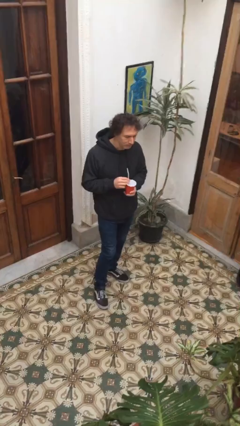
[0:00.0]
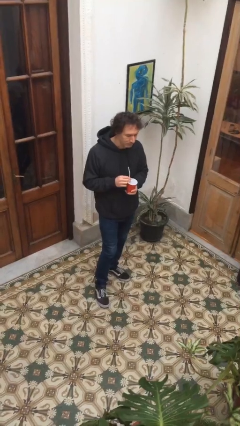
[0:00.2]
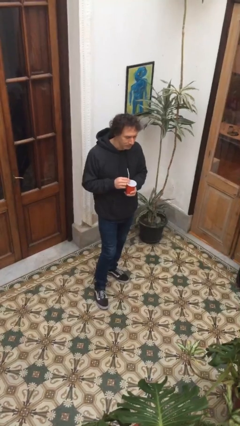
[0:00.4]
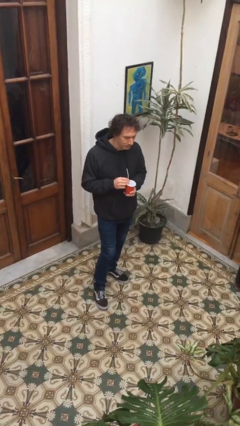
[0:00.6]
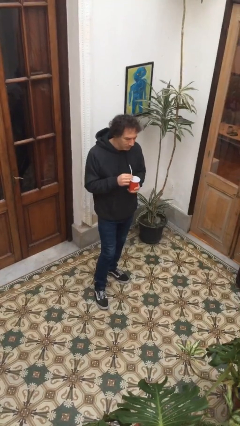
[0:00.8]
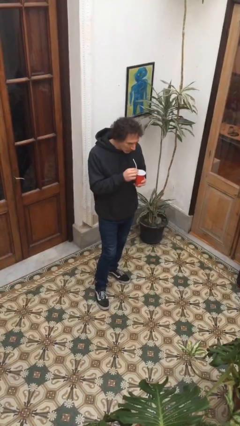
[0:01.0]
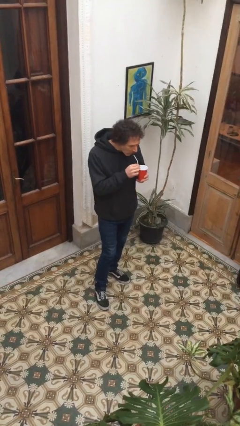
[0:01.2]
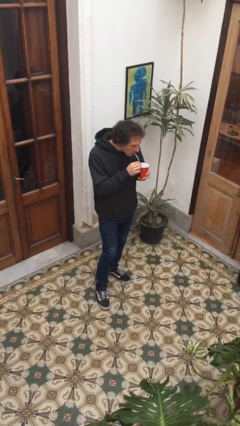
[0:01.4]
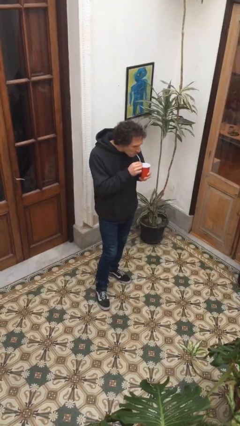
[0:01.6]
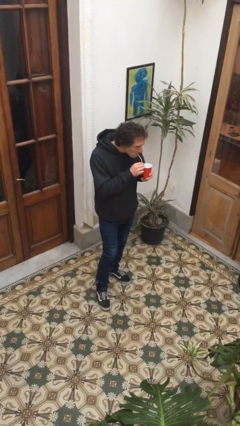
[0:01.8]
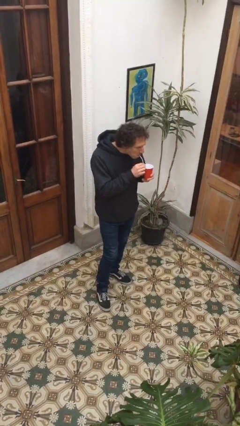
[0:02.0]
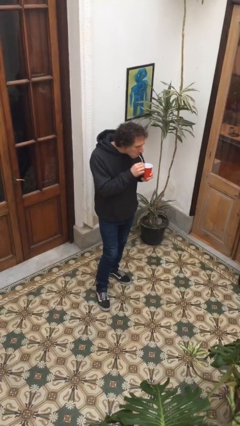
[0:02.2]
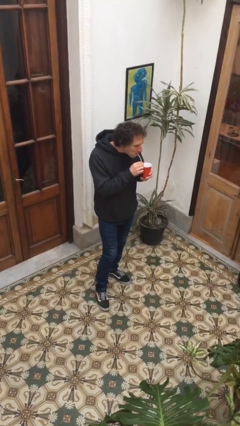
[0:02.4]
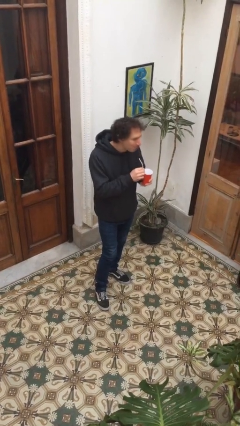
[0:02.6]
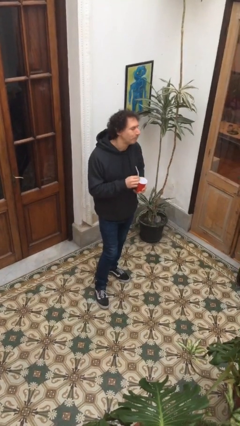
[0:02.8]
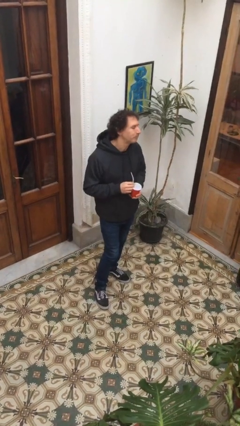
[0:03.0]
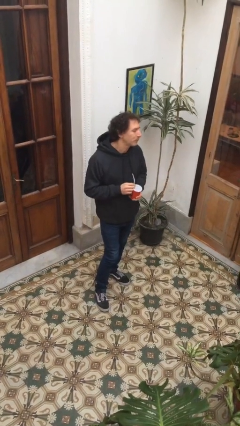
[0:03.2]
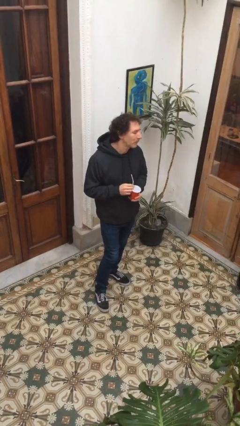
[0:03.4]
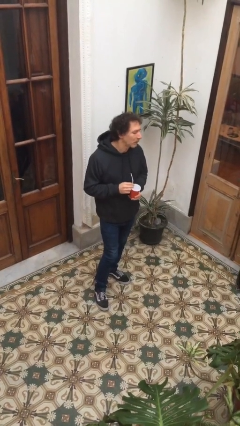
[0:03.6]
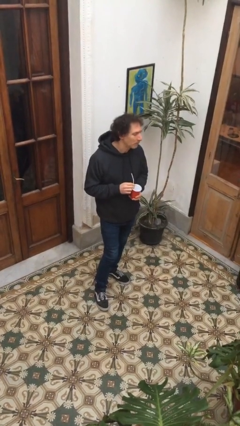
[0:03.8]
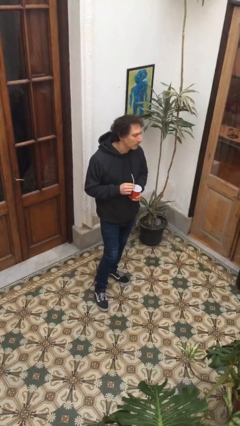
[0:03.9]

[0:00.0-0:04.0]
person drinks from straw

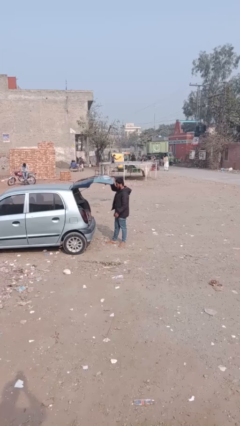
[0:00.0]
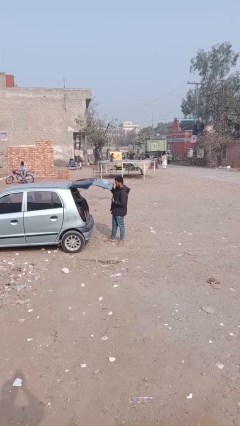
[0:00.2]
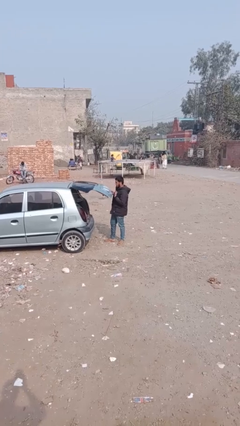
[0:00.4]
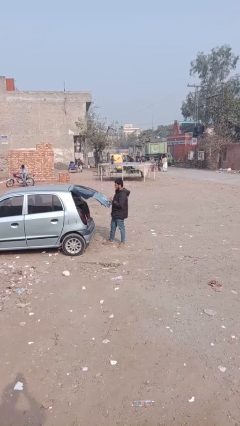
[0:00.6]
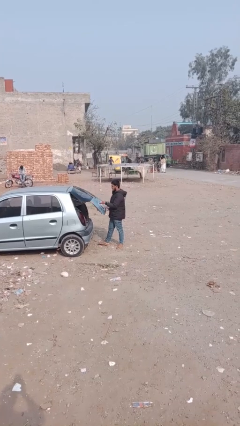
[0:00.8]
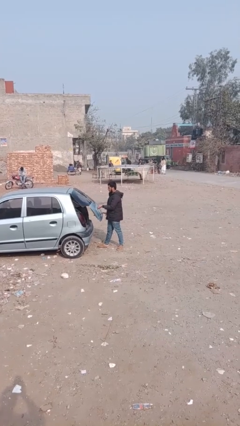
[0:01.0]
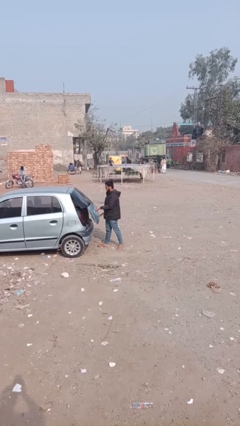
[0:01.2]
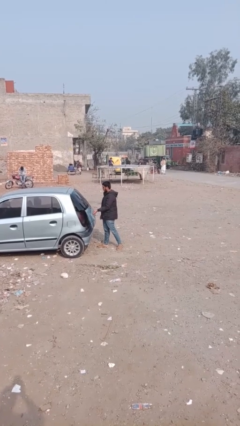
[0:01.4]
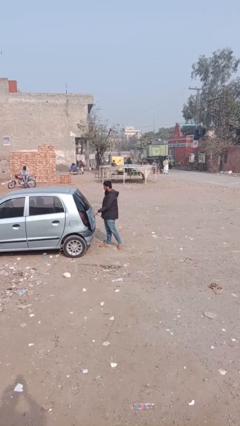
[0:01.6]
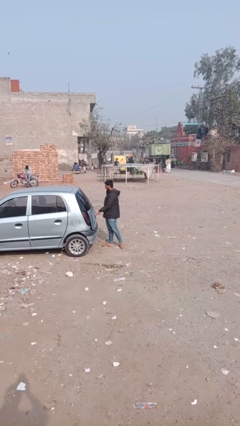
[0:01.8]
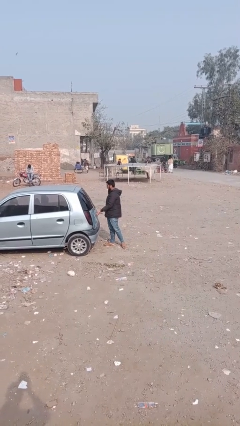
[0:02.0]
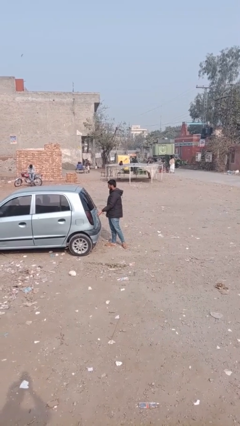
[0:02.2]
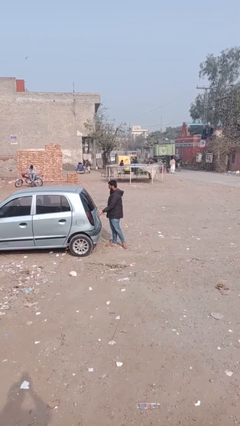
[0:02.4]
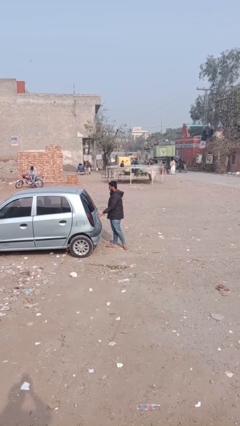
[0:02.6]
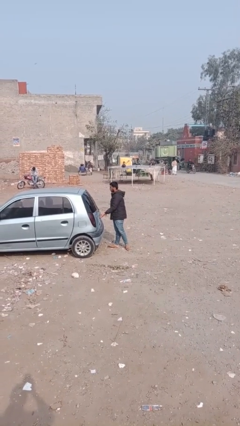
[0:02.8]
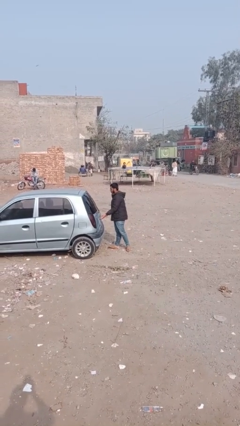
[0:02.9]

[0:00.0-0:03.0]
person closes car trunk

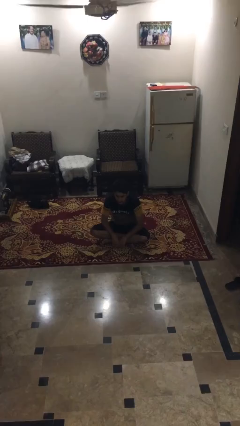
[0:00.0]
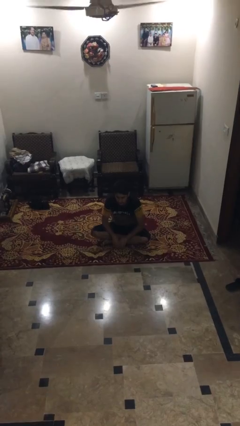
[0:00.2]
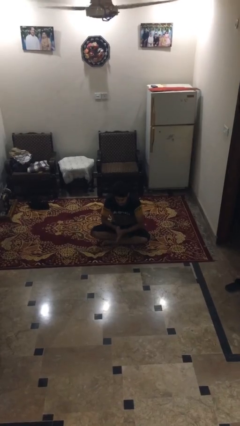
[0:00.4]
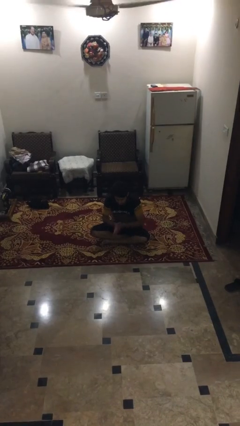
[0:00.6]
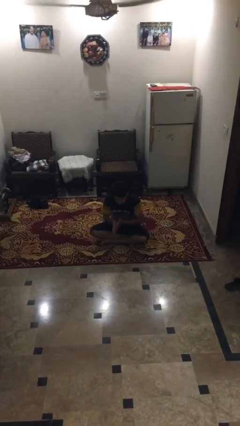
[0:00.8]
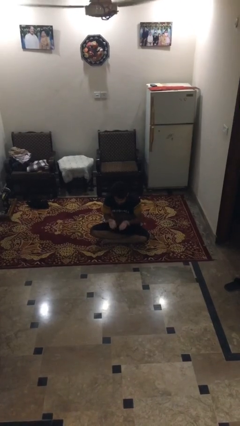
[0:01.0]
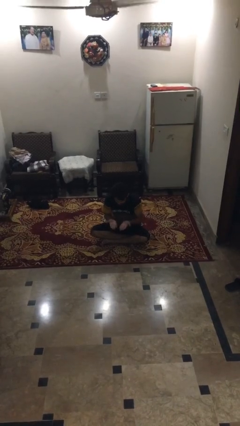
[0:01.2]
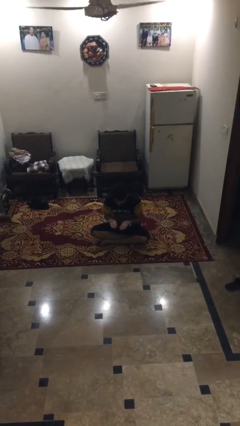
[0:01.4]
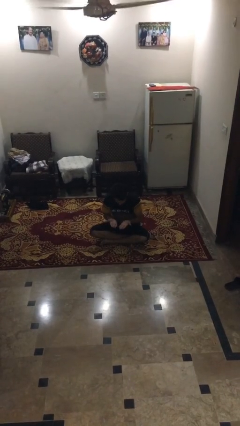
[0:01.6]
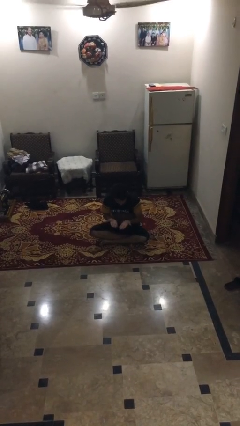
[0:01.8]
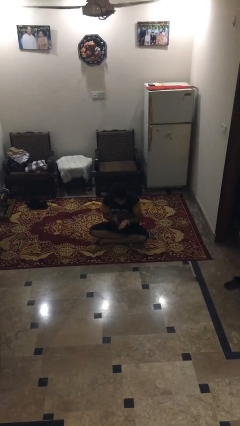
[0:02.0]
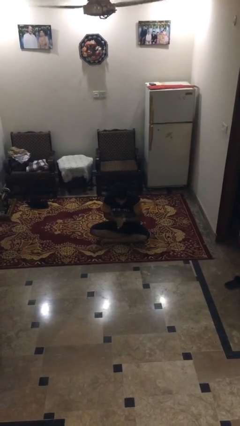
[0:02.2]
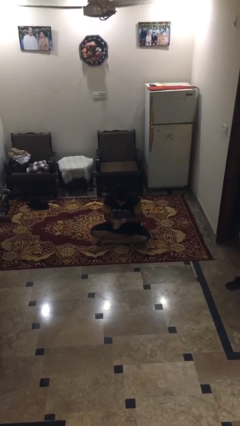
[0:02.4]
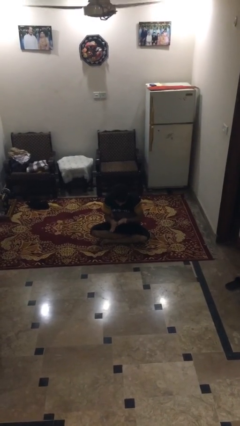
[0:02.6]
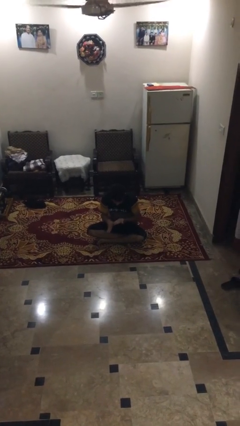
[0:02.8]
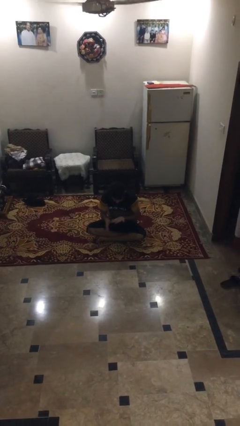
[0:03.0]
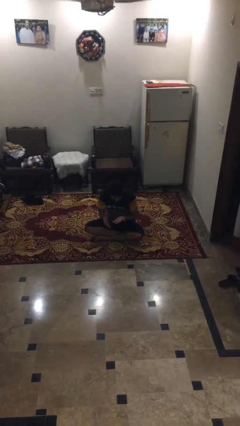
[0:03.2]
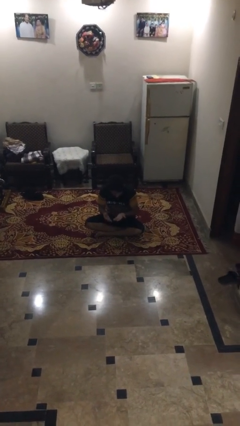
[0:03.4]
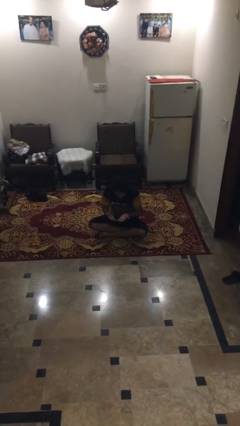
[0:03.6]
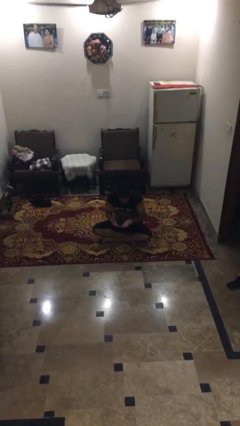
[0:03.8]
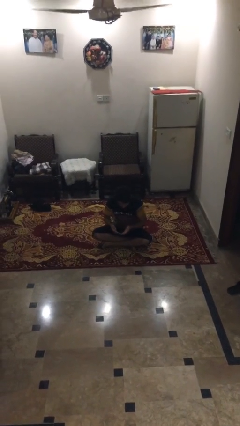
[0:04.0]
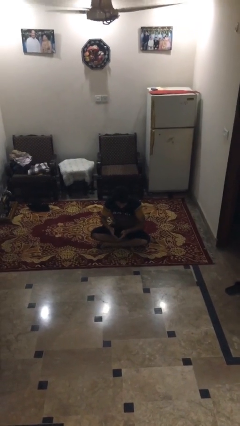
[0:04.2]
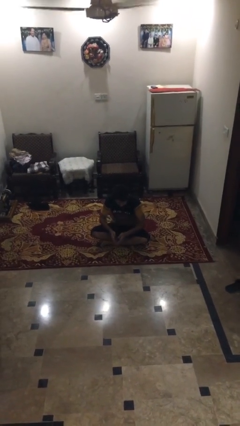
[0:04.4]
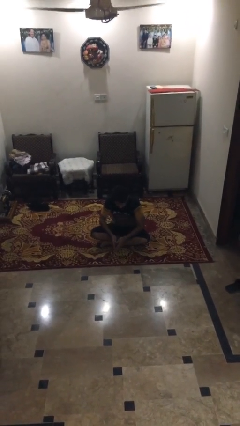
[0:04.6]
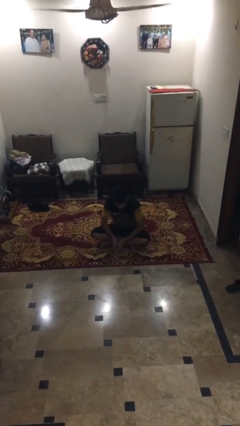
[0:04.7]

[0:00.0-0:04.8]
person looks at hands in lap

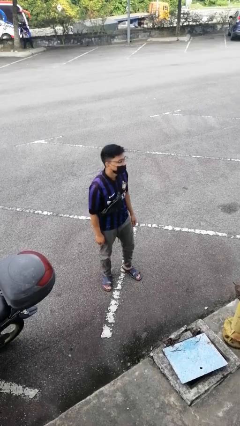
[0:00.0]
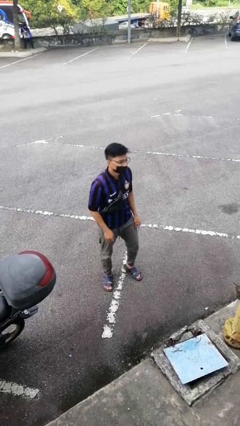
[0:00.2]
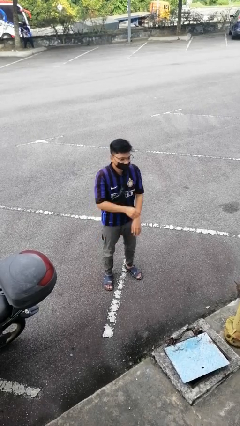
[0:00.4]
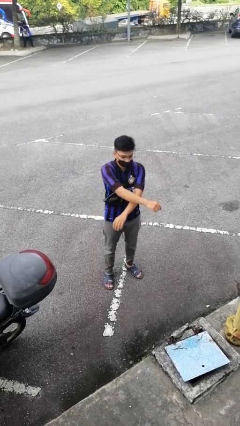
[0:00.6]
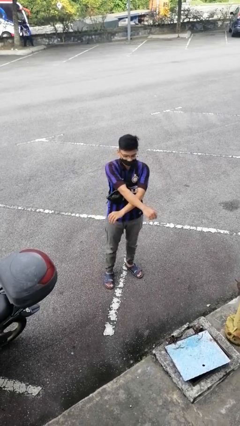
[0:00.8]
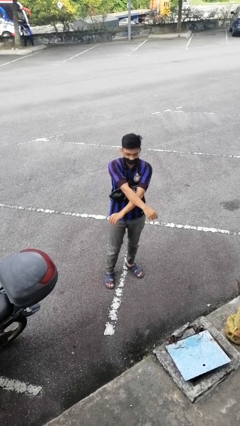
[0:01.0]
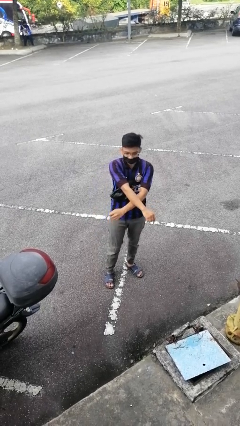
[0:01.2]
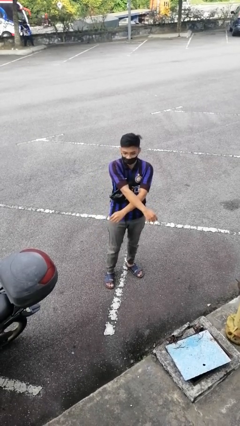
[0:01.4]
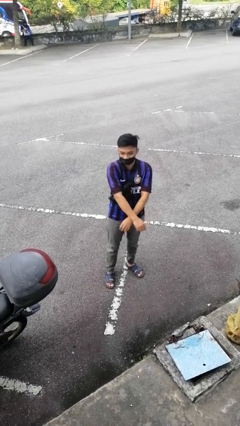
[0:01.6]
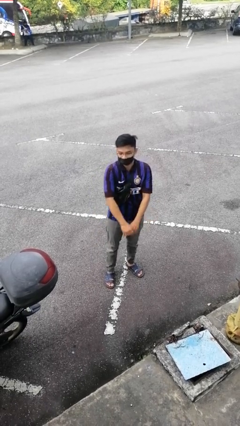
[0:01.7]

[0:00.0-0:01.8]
person gestures arms x

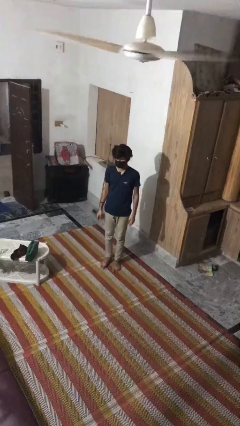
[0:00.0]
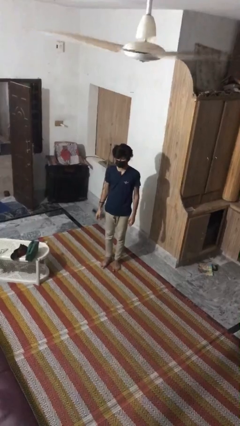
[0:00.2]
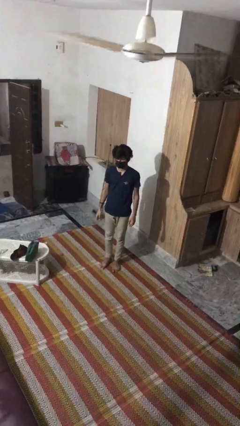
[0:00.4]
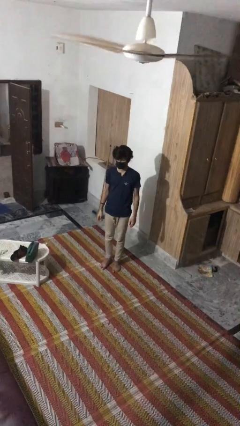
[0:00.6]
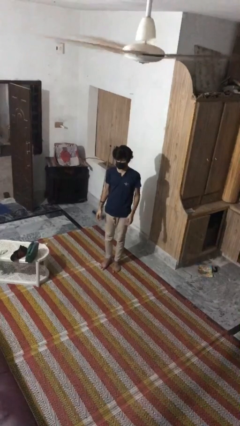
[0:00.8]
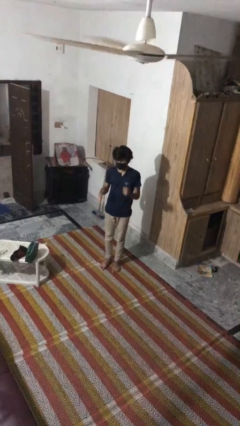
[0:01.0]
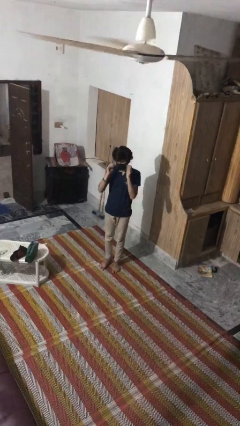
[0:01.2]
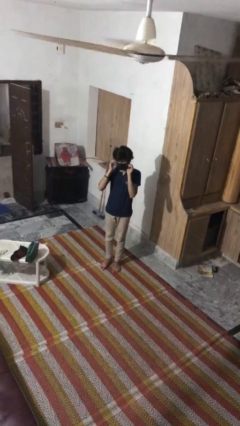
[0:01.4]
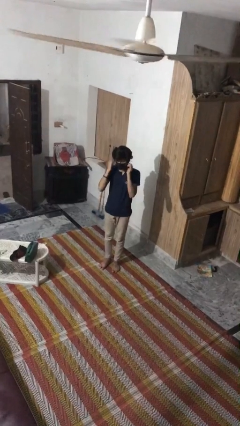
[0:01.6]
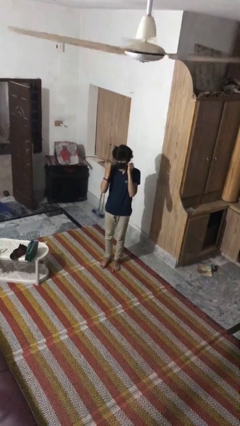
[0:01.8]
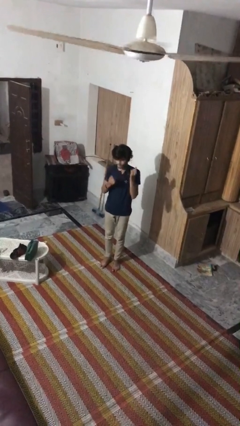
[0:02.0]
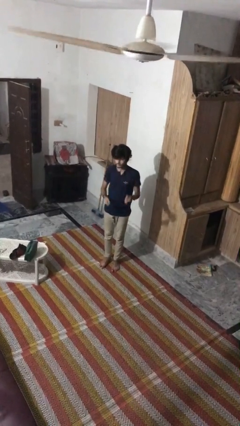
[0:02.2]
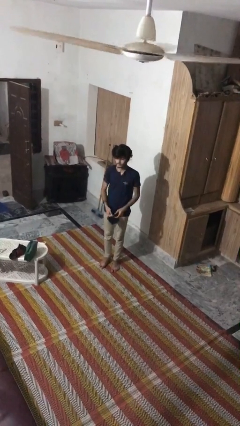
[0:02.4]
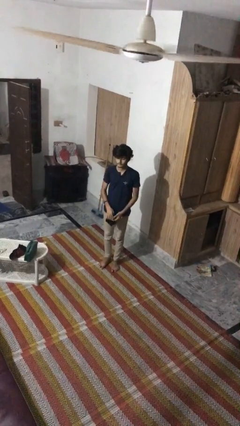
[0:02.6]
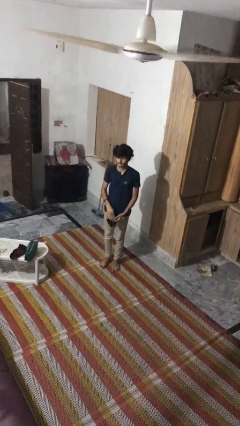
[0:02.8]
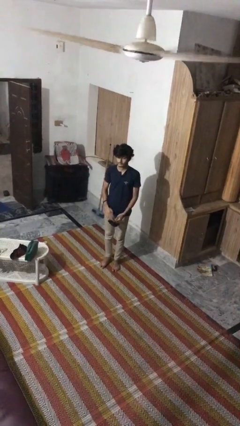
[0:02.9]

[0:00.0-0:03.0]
person takes off facemask

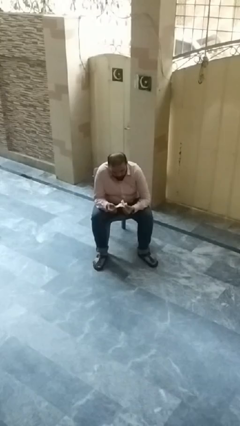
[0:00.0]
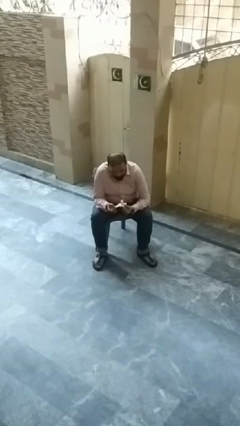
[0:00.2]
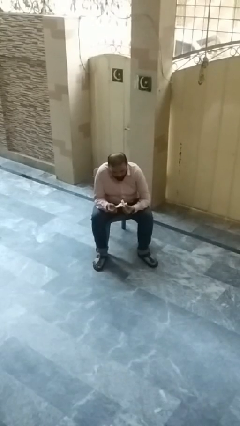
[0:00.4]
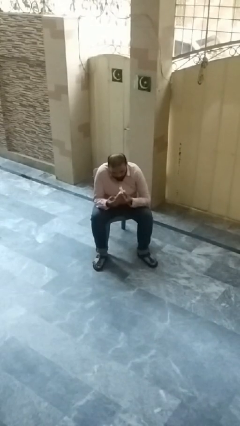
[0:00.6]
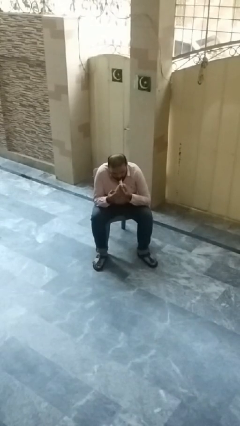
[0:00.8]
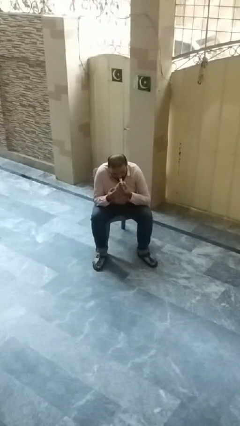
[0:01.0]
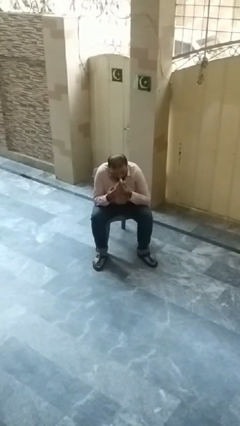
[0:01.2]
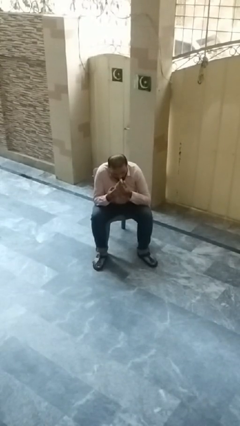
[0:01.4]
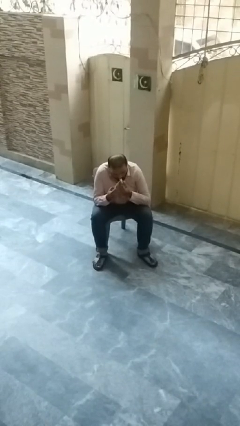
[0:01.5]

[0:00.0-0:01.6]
person eats banana
